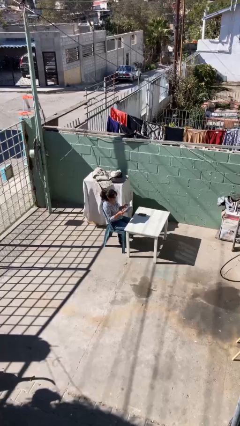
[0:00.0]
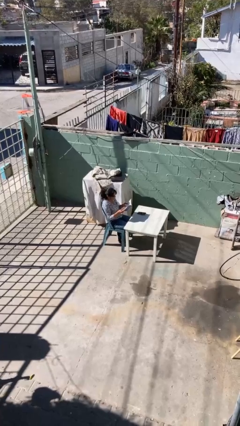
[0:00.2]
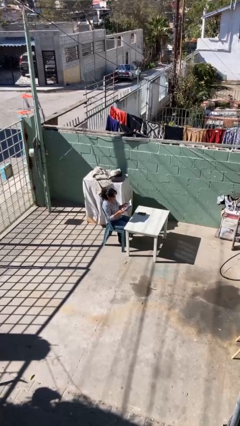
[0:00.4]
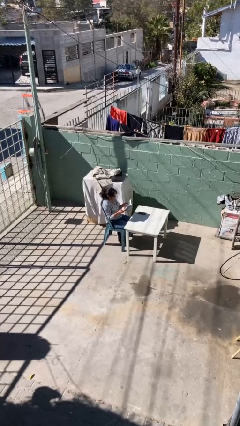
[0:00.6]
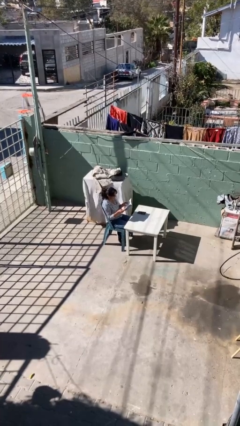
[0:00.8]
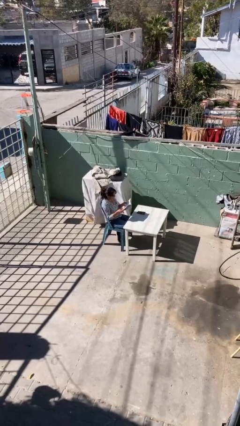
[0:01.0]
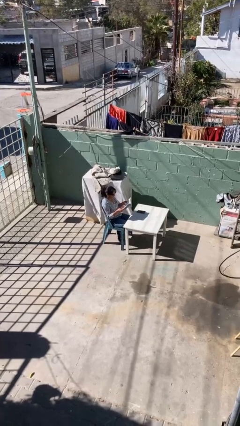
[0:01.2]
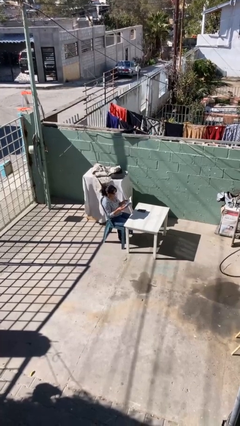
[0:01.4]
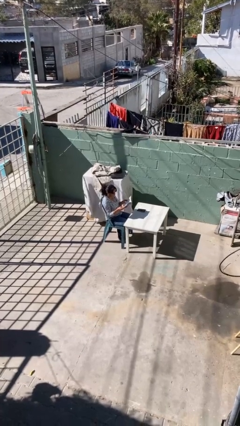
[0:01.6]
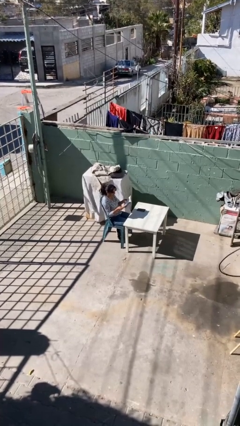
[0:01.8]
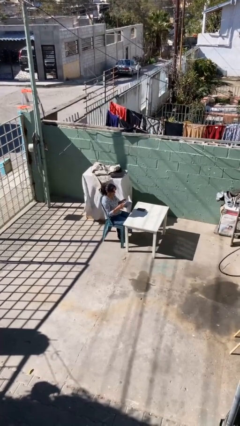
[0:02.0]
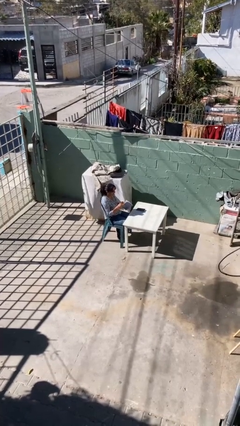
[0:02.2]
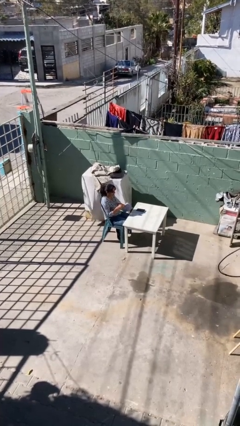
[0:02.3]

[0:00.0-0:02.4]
person reads document

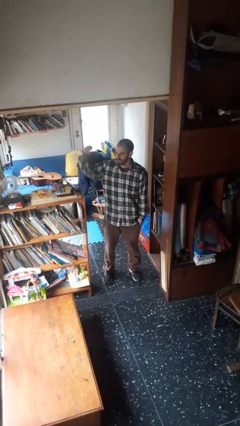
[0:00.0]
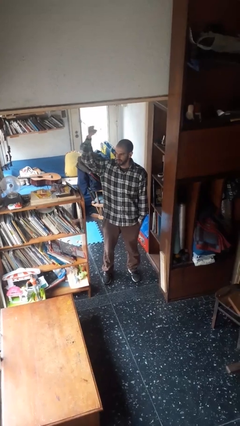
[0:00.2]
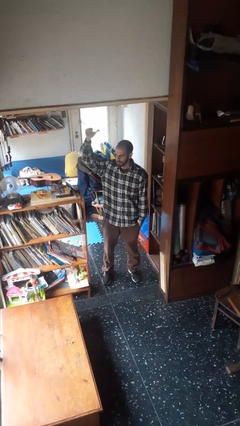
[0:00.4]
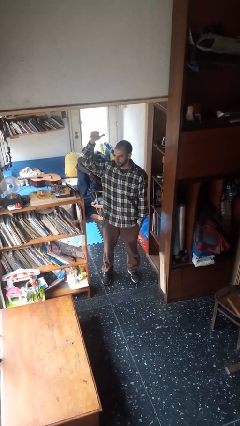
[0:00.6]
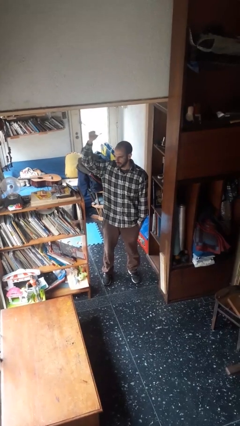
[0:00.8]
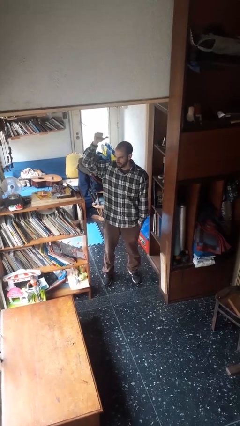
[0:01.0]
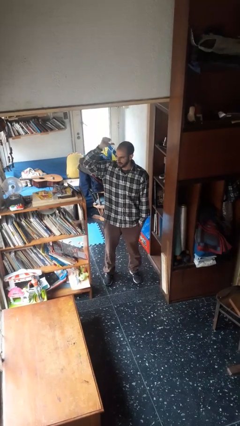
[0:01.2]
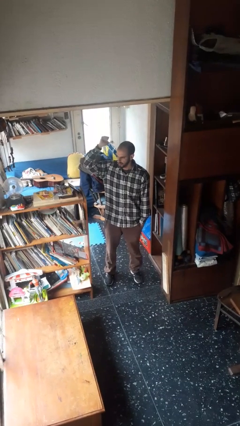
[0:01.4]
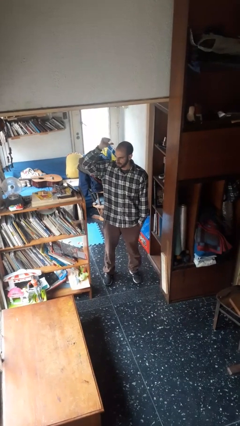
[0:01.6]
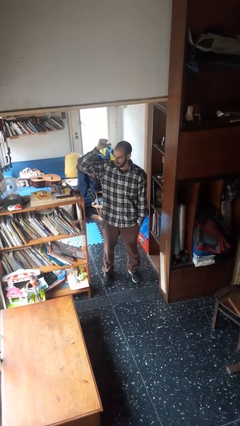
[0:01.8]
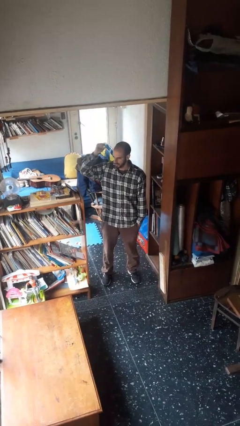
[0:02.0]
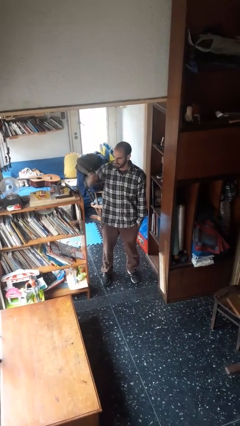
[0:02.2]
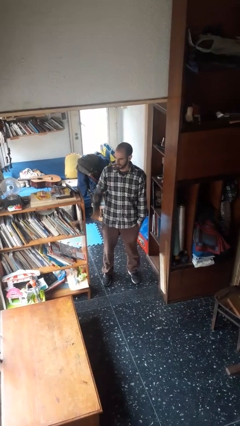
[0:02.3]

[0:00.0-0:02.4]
person gestures behind me

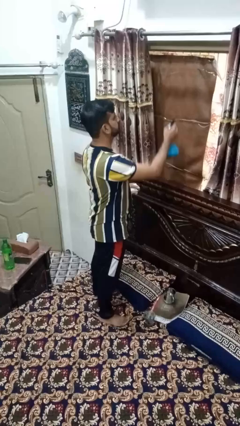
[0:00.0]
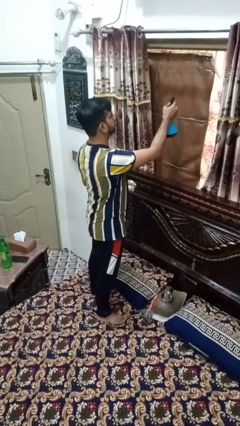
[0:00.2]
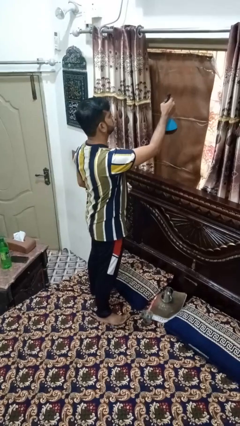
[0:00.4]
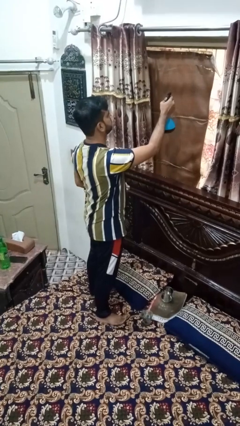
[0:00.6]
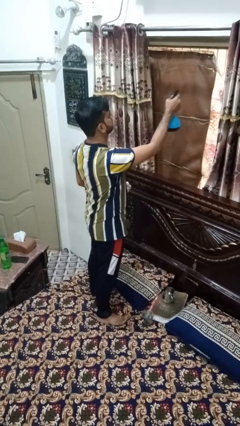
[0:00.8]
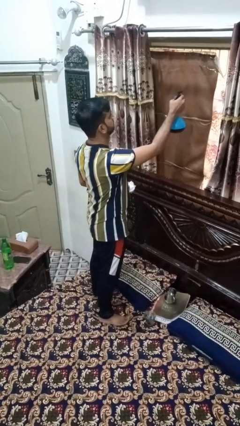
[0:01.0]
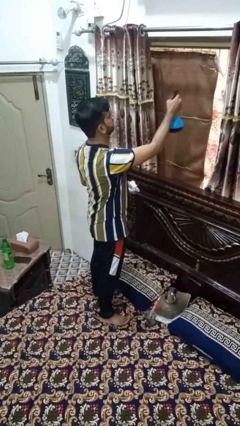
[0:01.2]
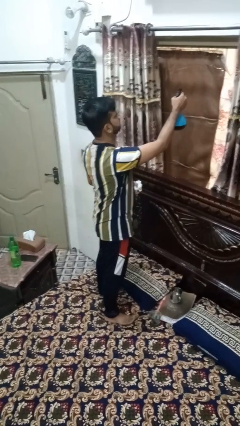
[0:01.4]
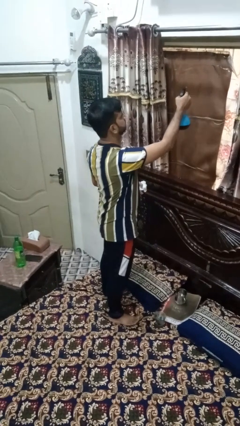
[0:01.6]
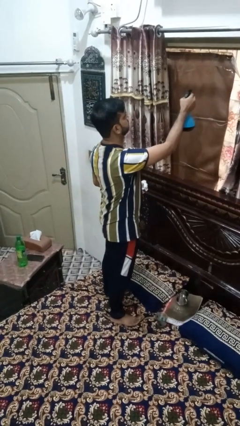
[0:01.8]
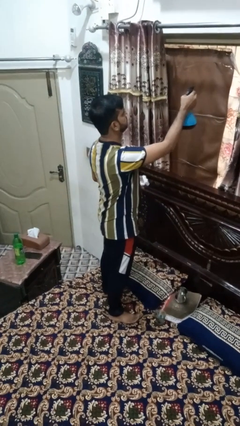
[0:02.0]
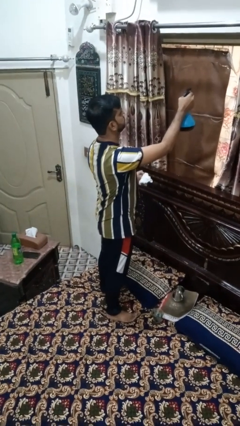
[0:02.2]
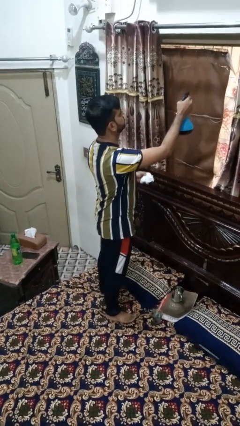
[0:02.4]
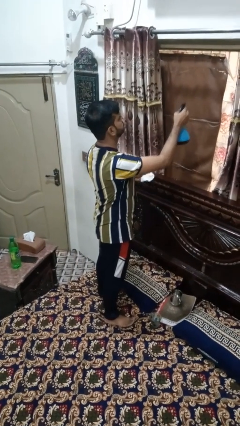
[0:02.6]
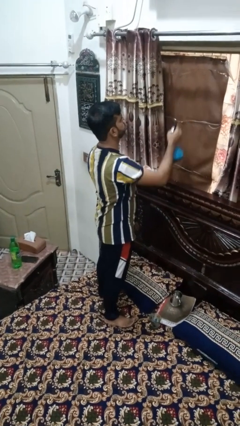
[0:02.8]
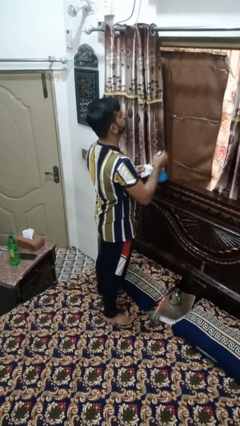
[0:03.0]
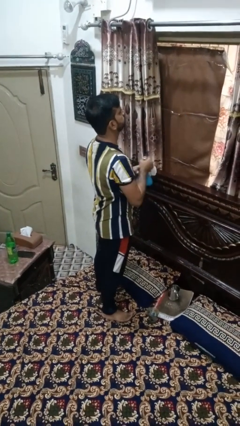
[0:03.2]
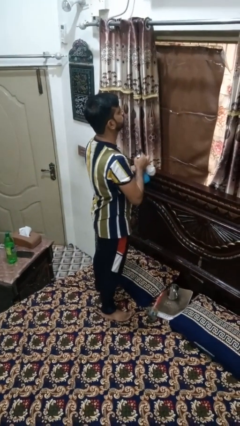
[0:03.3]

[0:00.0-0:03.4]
person sprays from bottle

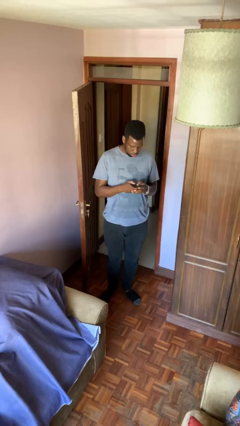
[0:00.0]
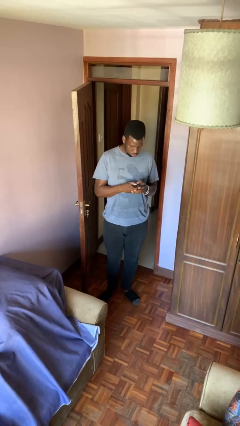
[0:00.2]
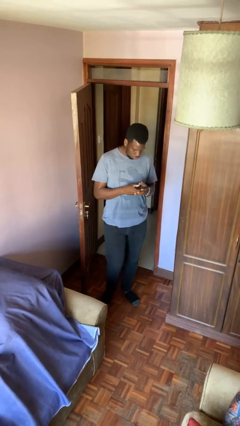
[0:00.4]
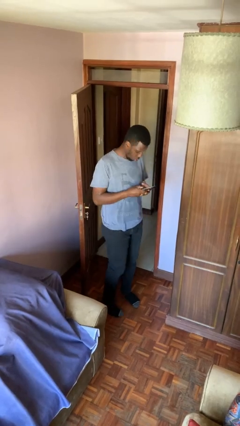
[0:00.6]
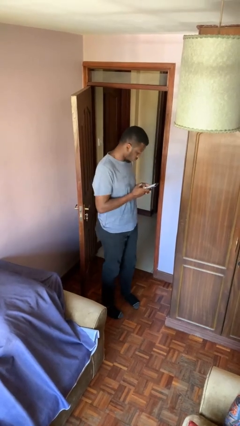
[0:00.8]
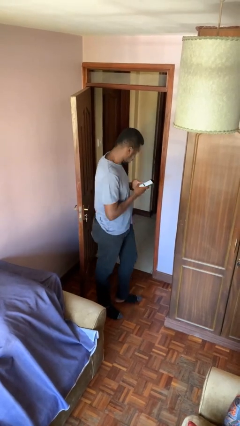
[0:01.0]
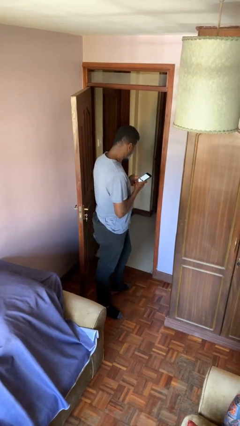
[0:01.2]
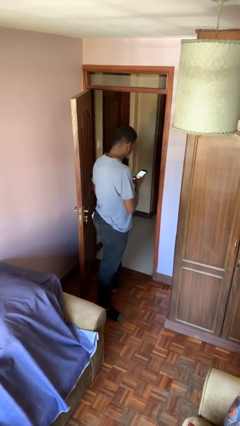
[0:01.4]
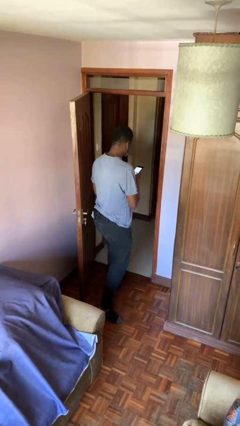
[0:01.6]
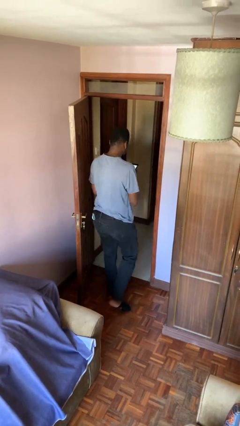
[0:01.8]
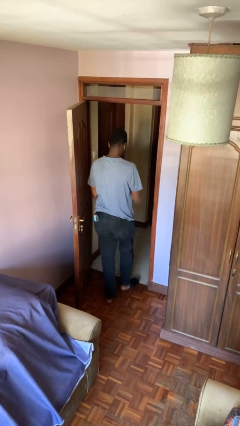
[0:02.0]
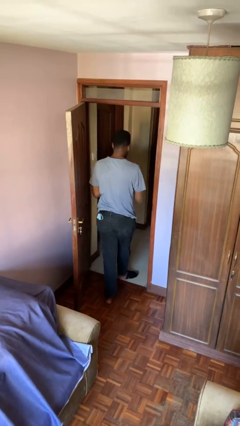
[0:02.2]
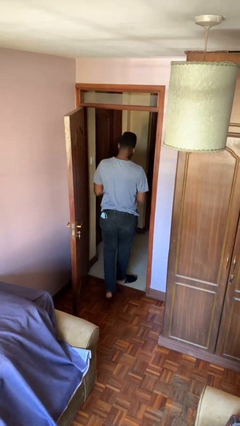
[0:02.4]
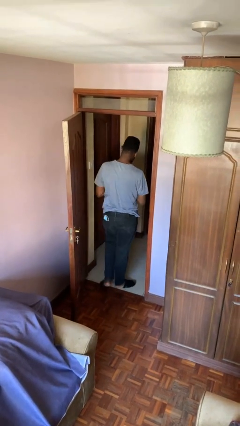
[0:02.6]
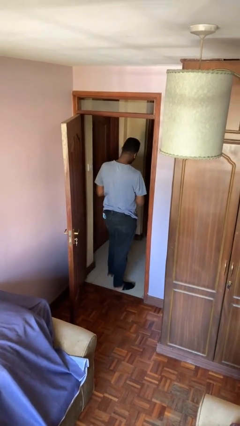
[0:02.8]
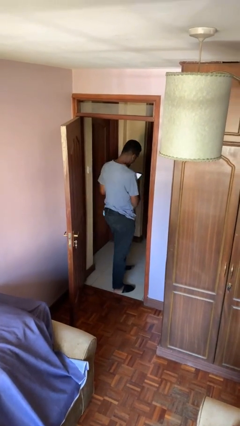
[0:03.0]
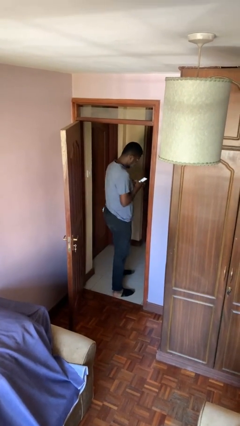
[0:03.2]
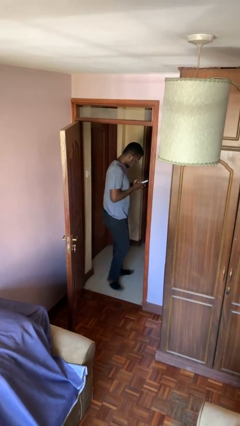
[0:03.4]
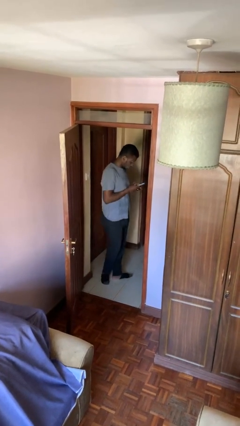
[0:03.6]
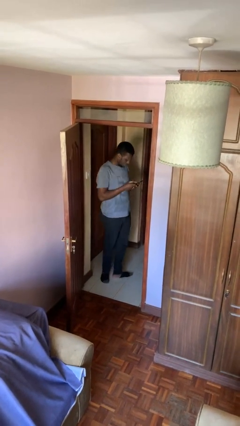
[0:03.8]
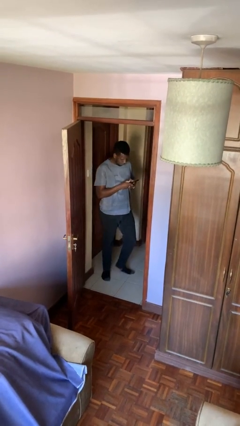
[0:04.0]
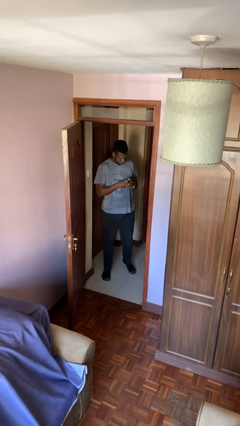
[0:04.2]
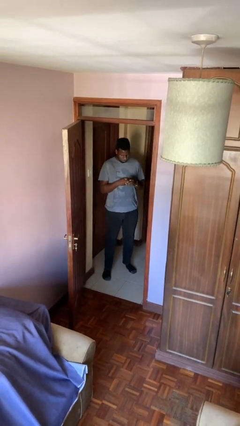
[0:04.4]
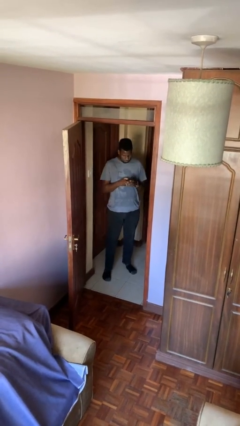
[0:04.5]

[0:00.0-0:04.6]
person exits scene through structure

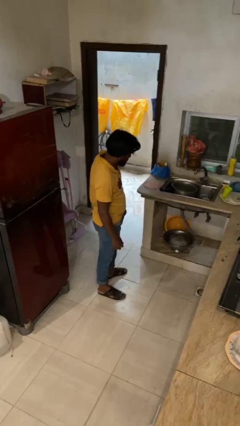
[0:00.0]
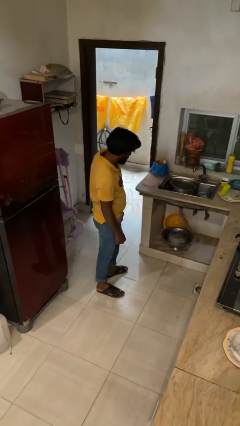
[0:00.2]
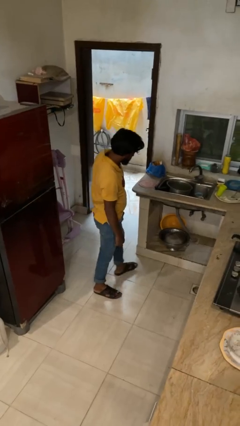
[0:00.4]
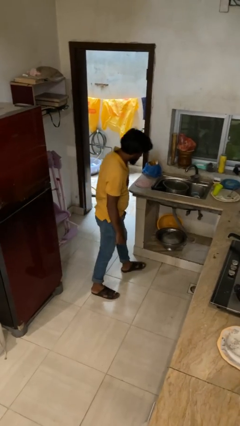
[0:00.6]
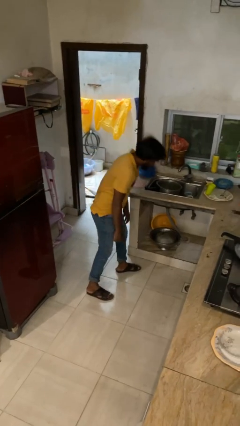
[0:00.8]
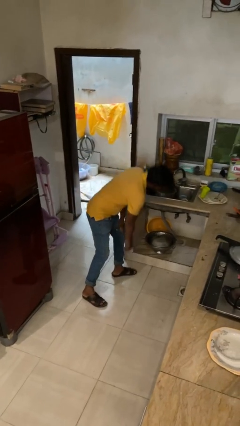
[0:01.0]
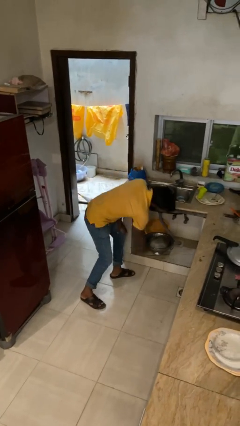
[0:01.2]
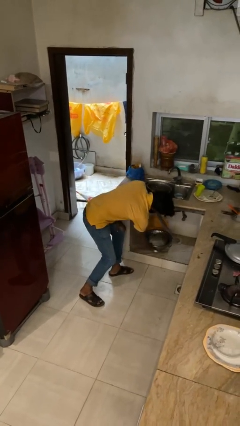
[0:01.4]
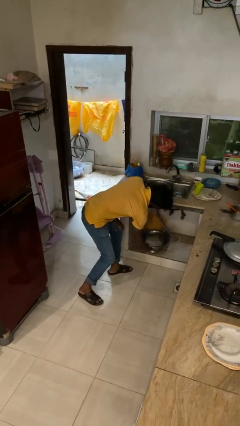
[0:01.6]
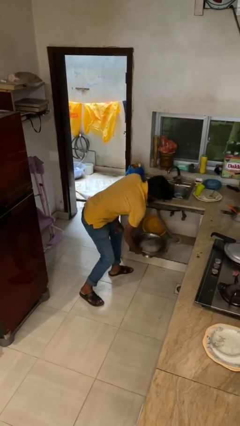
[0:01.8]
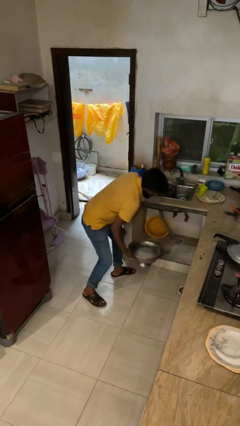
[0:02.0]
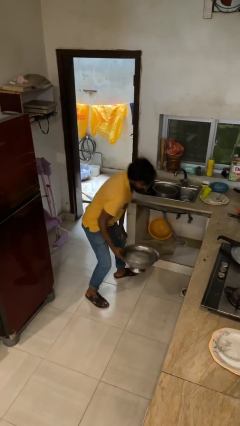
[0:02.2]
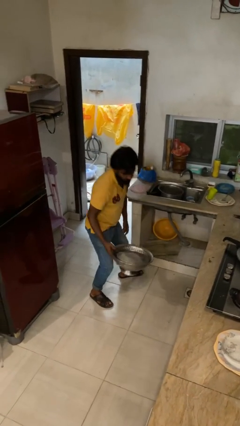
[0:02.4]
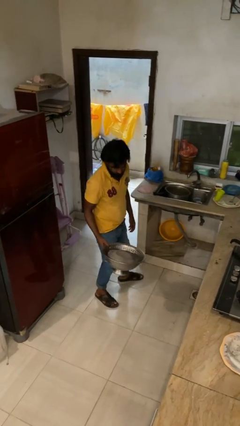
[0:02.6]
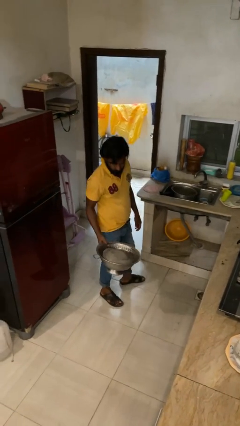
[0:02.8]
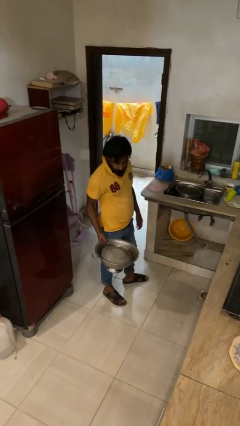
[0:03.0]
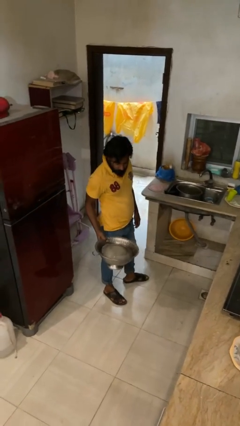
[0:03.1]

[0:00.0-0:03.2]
person picks up object from cabinet

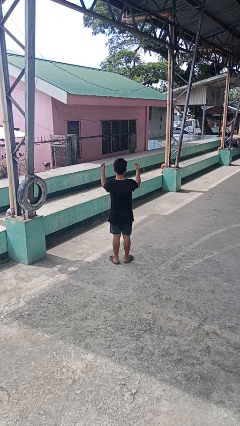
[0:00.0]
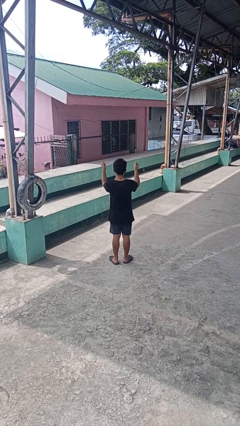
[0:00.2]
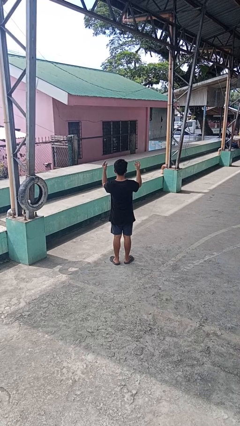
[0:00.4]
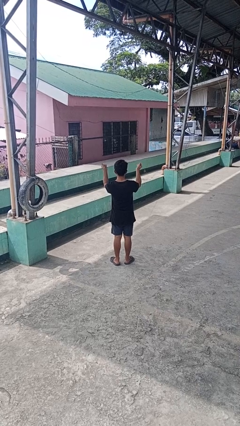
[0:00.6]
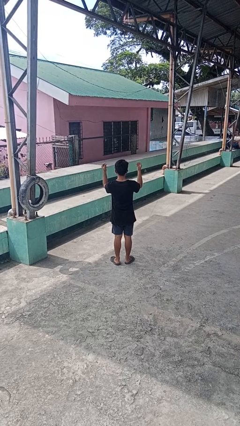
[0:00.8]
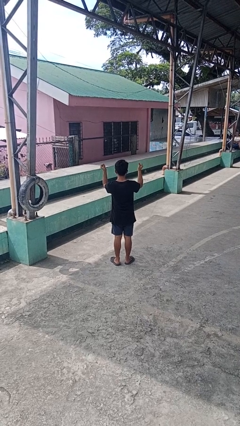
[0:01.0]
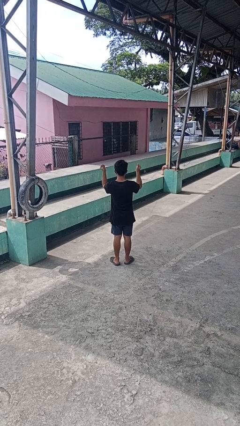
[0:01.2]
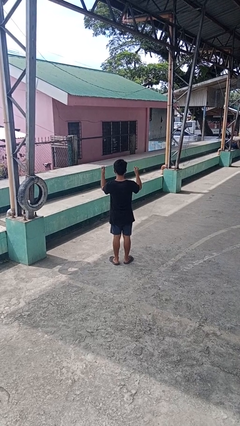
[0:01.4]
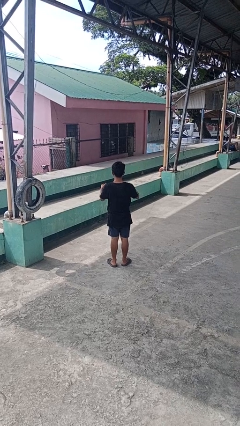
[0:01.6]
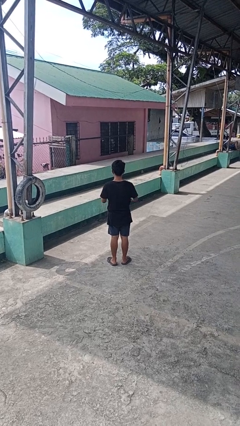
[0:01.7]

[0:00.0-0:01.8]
person snaps fingers
